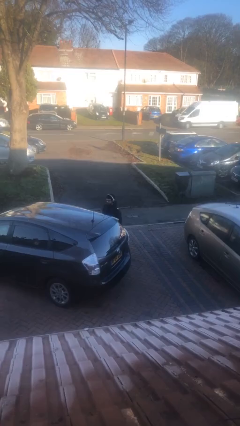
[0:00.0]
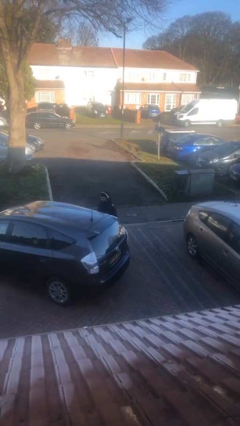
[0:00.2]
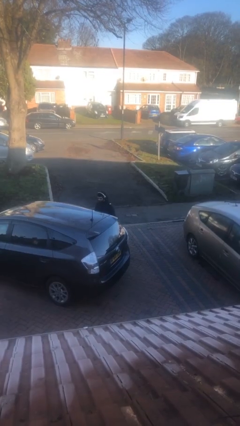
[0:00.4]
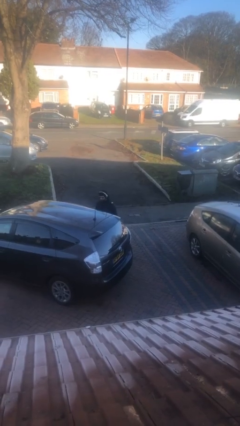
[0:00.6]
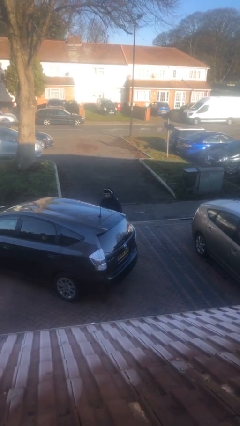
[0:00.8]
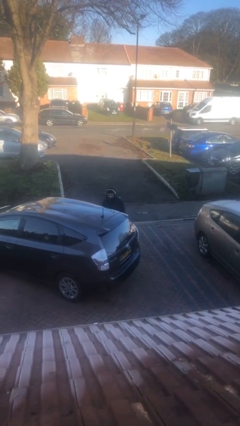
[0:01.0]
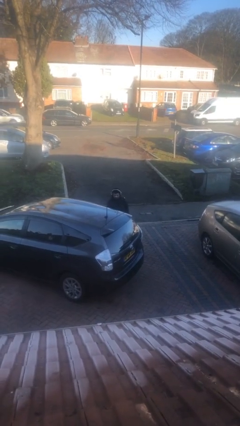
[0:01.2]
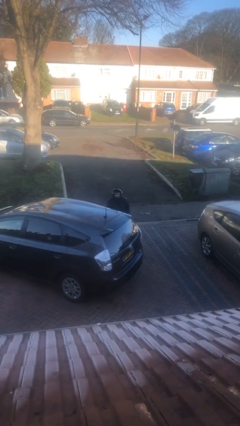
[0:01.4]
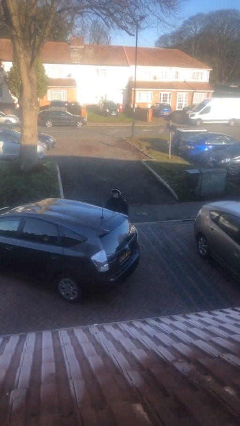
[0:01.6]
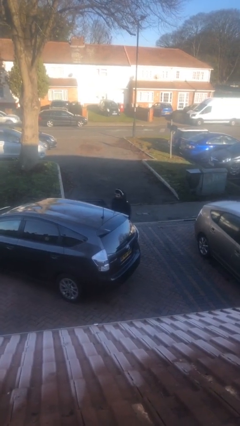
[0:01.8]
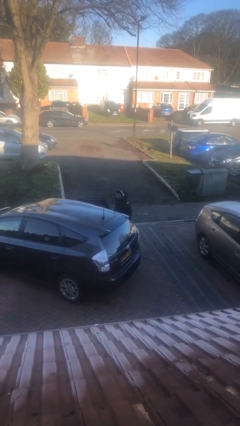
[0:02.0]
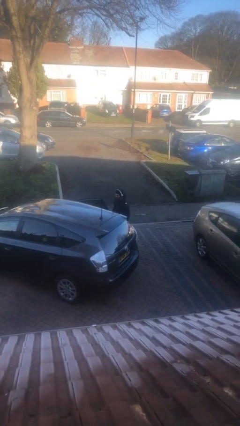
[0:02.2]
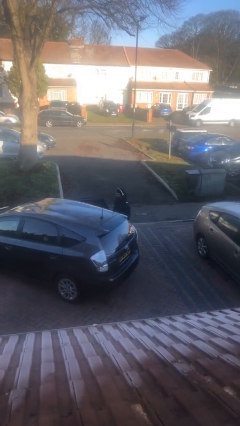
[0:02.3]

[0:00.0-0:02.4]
person opens car door

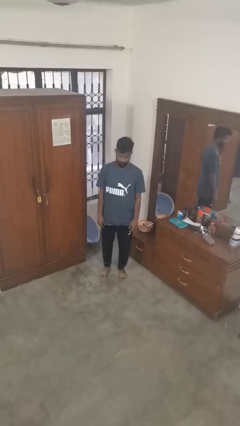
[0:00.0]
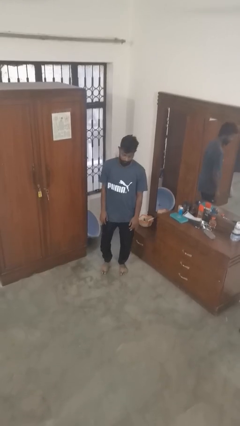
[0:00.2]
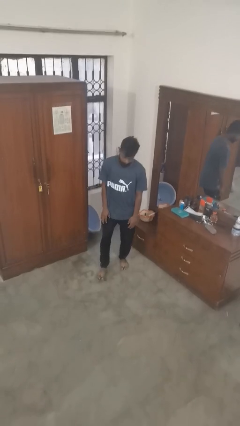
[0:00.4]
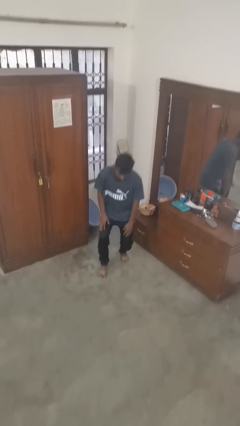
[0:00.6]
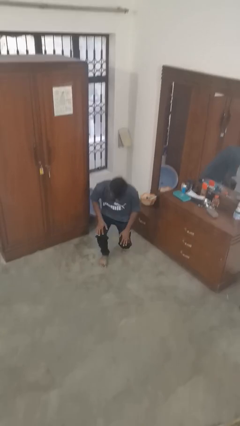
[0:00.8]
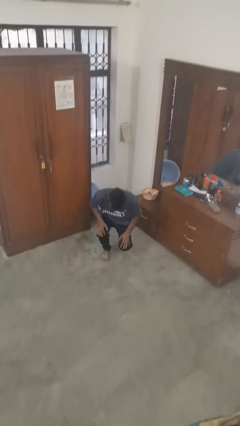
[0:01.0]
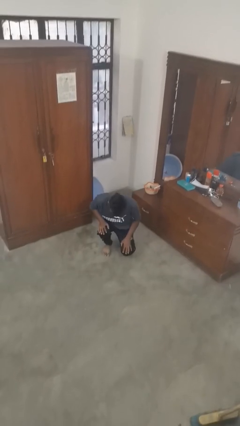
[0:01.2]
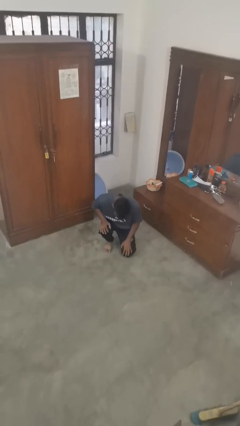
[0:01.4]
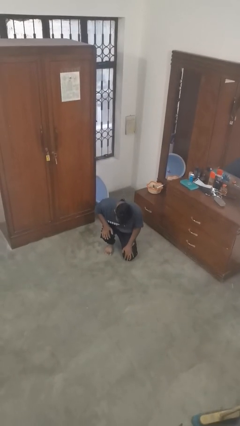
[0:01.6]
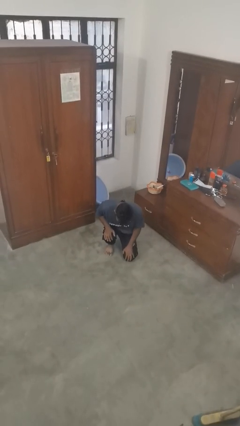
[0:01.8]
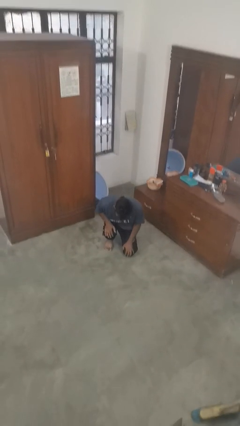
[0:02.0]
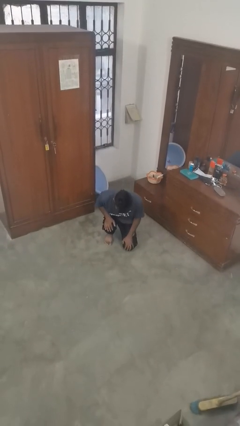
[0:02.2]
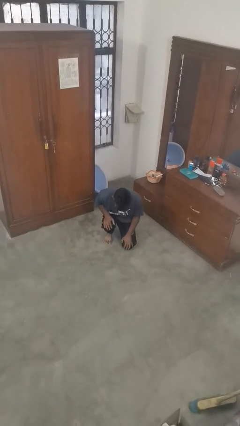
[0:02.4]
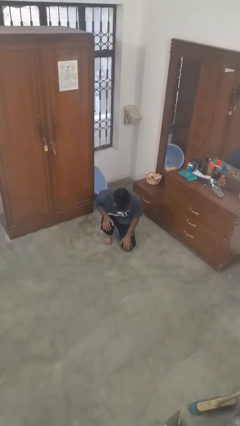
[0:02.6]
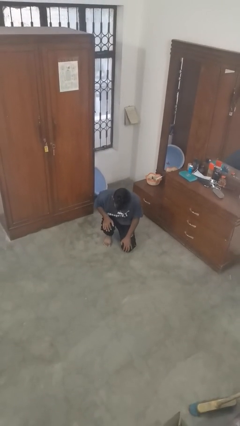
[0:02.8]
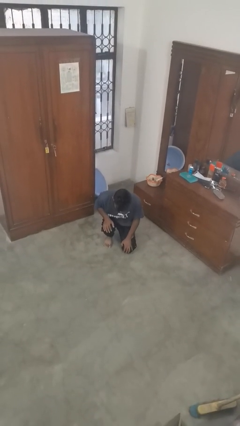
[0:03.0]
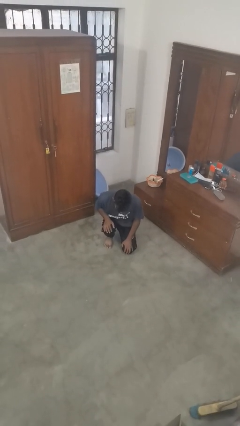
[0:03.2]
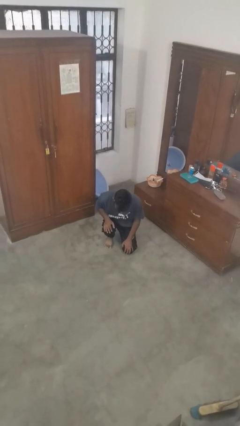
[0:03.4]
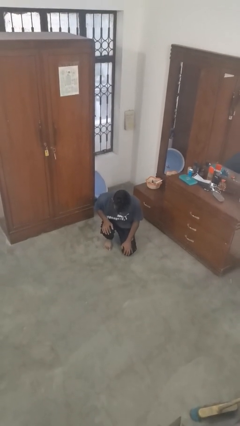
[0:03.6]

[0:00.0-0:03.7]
person kneels

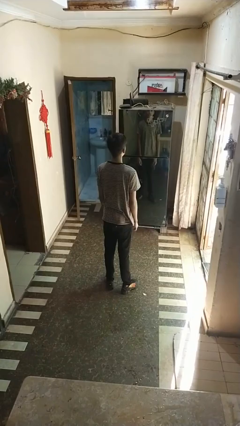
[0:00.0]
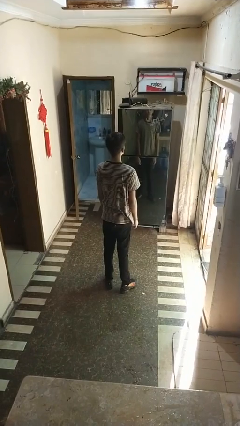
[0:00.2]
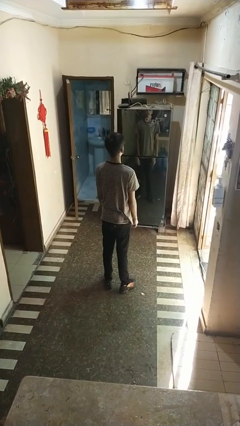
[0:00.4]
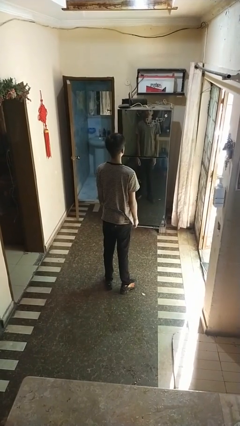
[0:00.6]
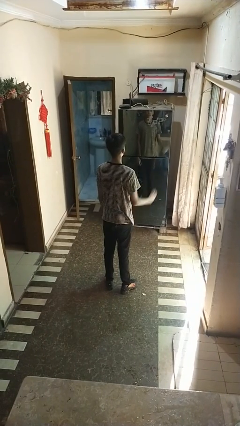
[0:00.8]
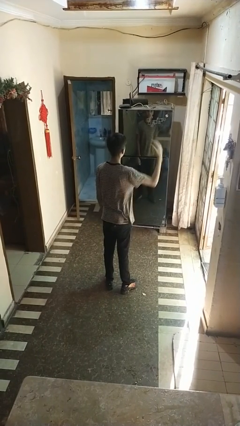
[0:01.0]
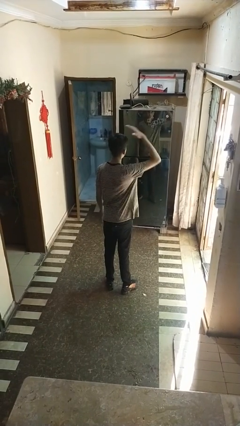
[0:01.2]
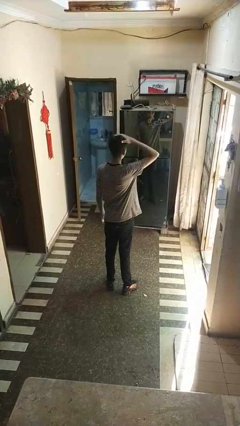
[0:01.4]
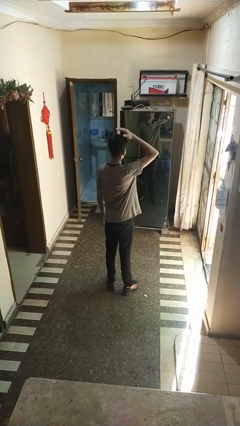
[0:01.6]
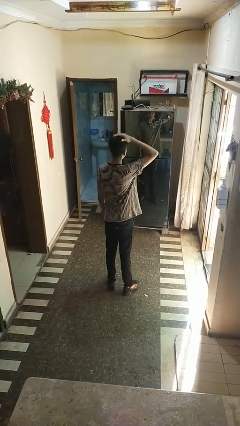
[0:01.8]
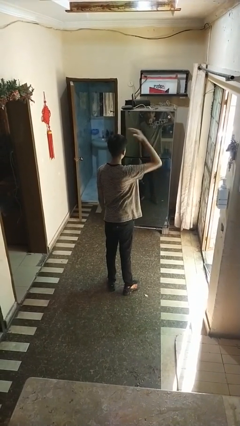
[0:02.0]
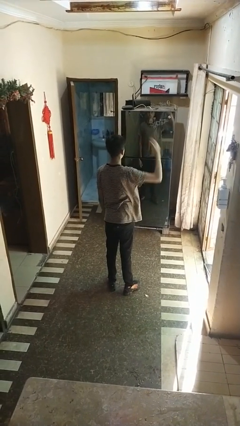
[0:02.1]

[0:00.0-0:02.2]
person pats head

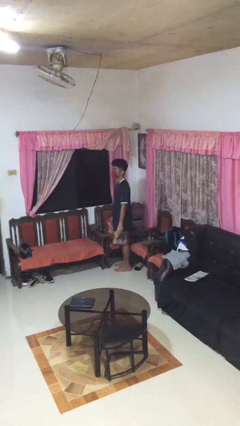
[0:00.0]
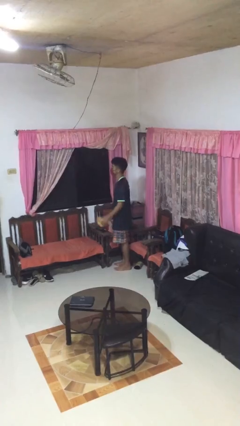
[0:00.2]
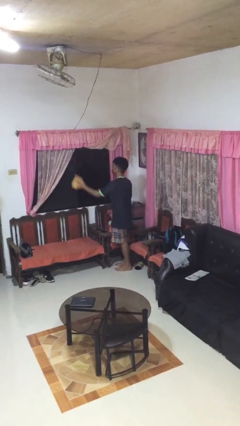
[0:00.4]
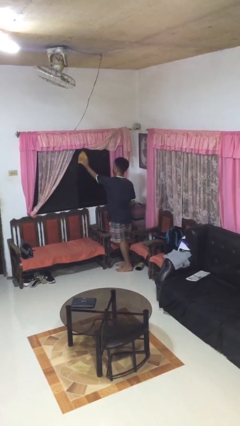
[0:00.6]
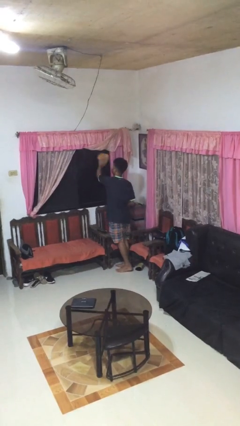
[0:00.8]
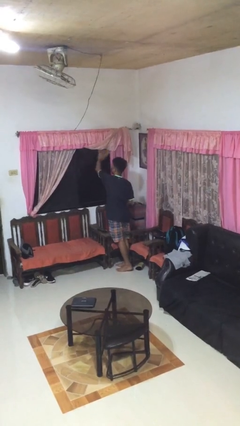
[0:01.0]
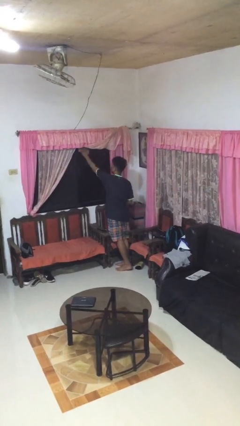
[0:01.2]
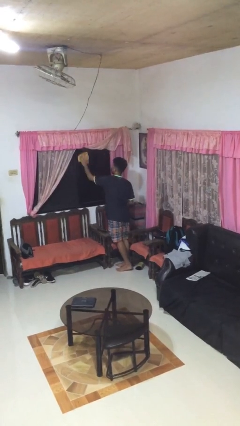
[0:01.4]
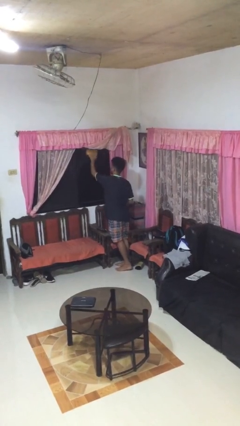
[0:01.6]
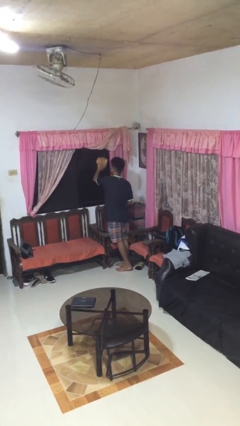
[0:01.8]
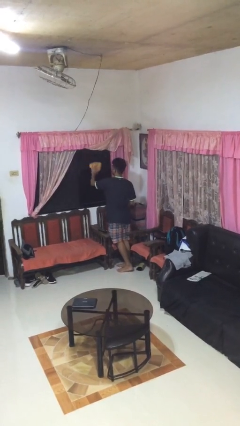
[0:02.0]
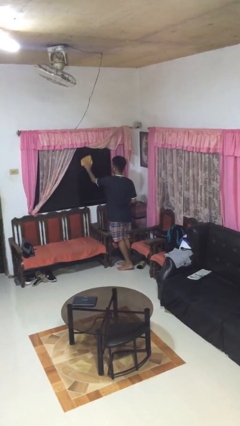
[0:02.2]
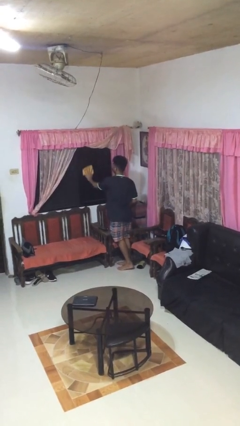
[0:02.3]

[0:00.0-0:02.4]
person washes window

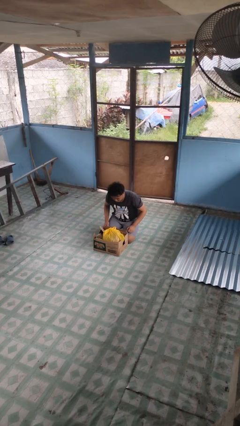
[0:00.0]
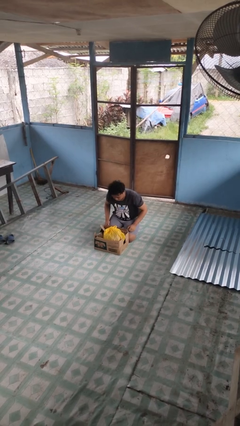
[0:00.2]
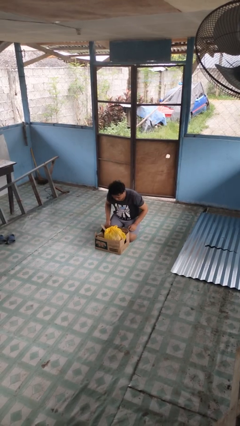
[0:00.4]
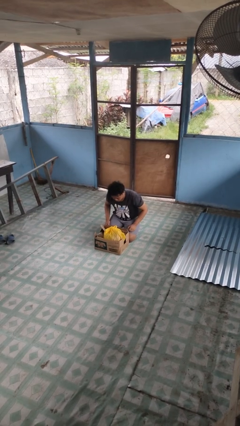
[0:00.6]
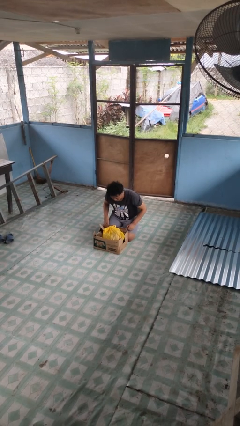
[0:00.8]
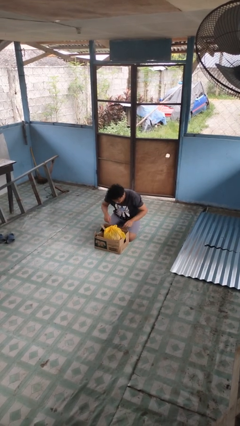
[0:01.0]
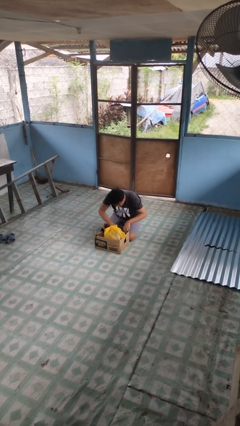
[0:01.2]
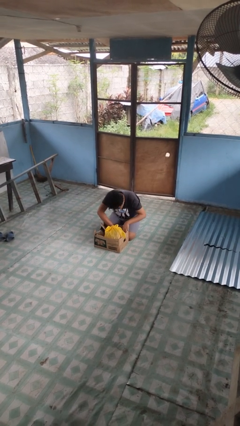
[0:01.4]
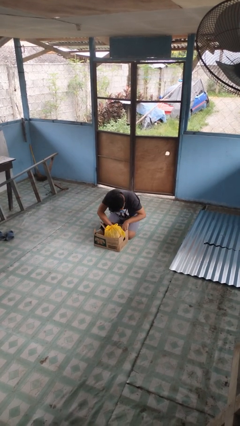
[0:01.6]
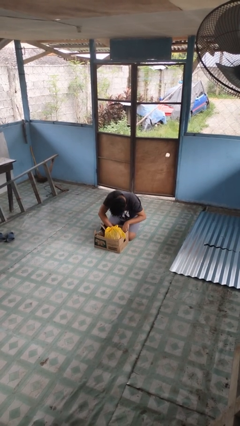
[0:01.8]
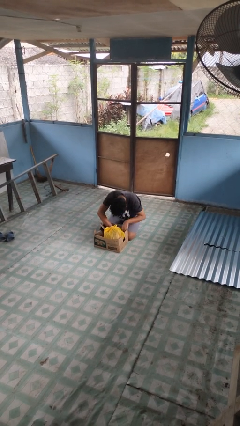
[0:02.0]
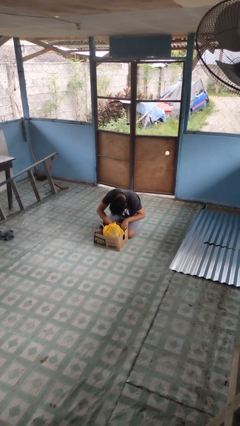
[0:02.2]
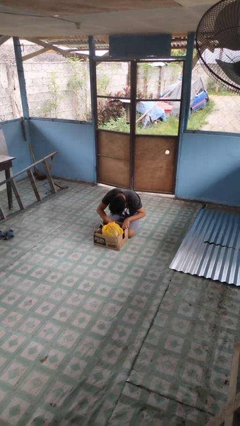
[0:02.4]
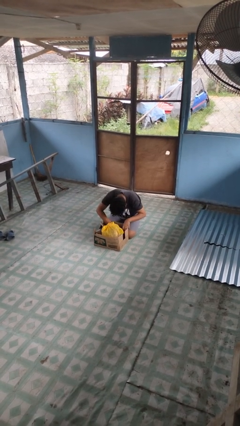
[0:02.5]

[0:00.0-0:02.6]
person searches in box

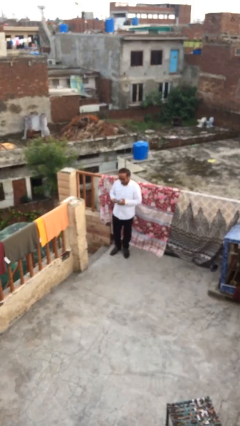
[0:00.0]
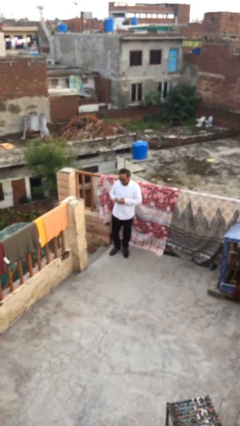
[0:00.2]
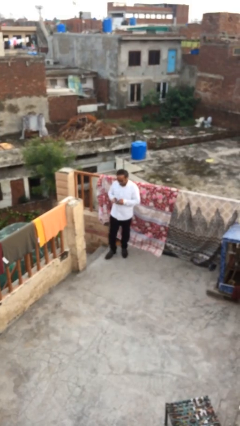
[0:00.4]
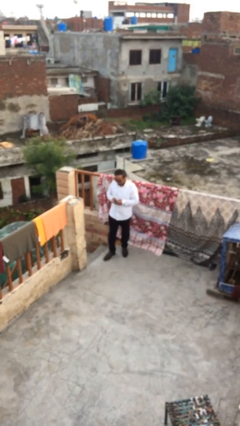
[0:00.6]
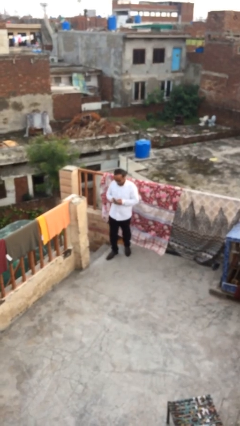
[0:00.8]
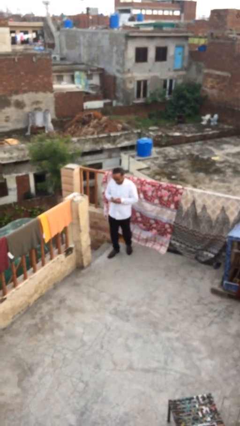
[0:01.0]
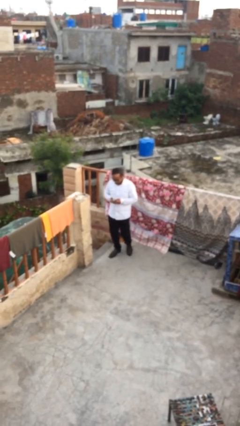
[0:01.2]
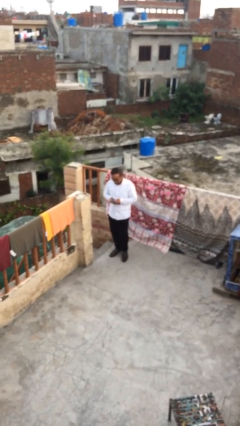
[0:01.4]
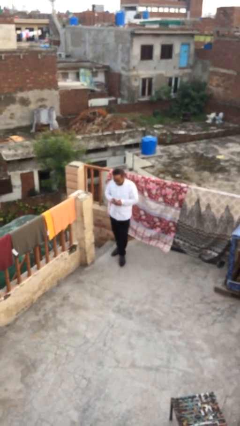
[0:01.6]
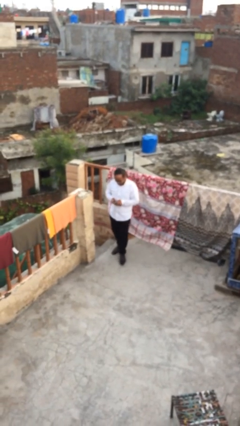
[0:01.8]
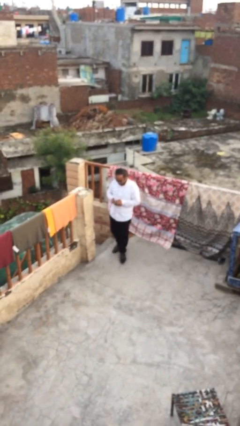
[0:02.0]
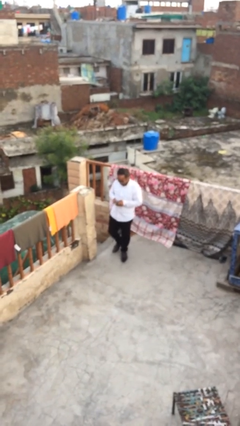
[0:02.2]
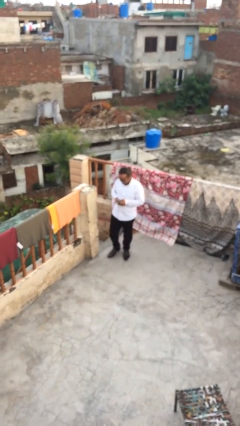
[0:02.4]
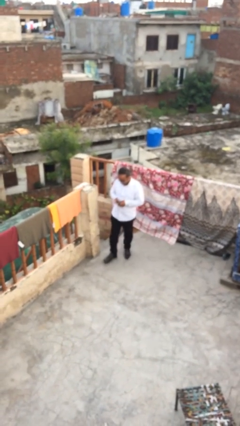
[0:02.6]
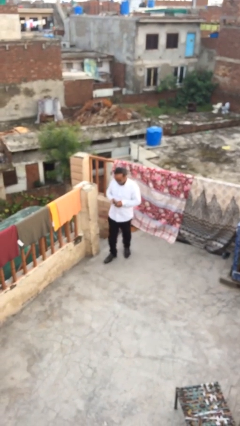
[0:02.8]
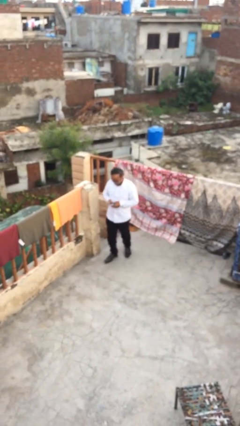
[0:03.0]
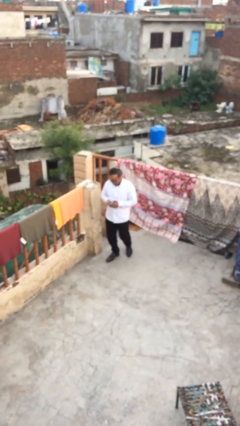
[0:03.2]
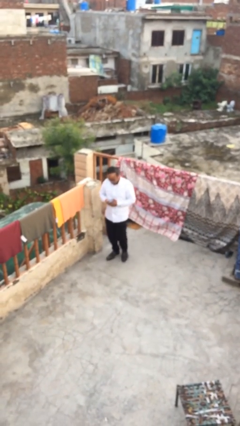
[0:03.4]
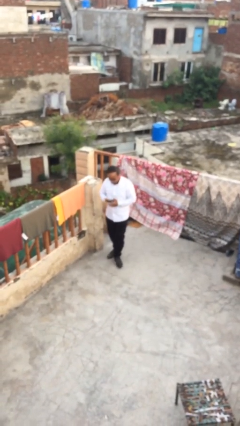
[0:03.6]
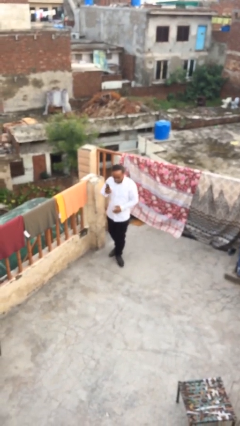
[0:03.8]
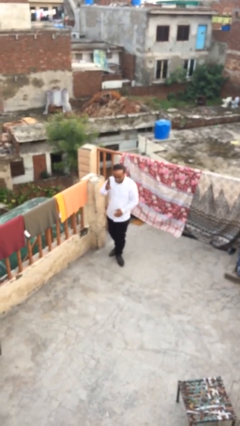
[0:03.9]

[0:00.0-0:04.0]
person texts on phone

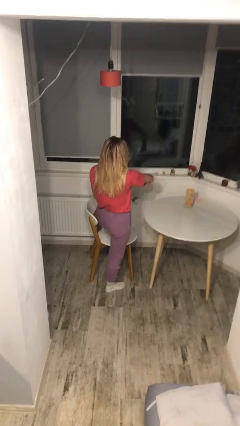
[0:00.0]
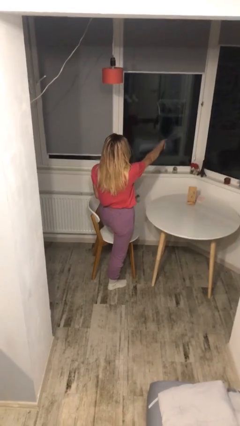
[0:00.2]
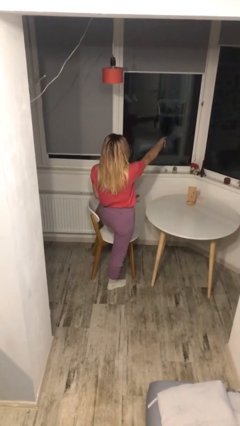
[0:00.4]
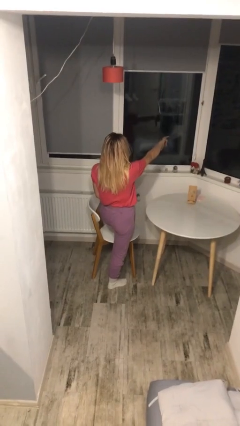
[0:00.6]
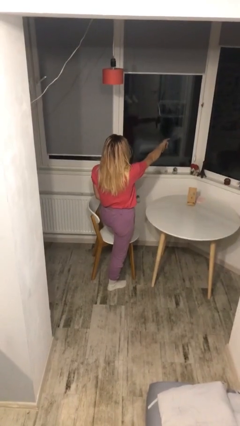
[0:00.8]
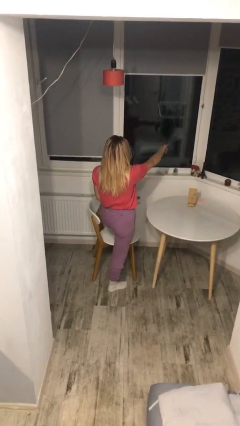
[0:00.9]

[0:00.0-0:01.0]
person gestures hang loose
